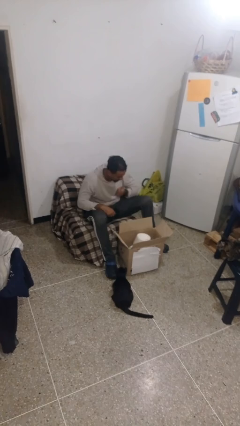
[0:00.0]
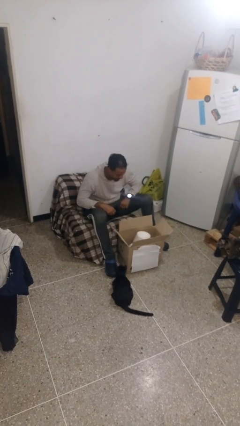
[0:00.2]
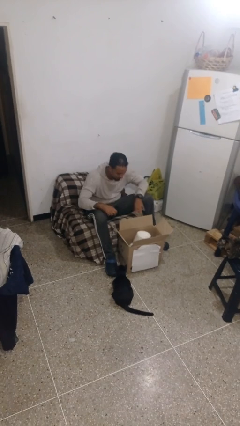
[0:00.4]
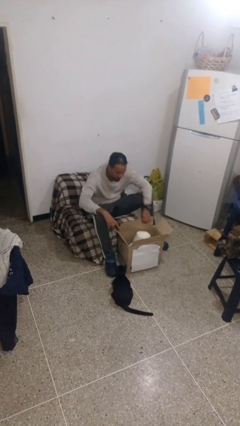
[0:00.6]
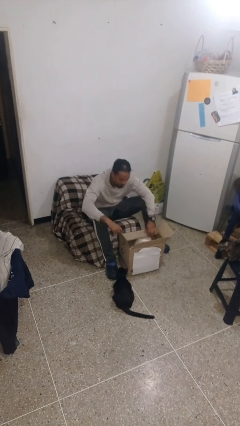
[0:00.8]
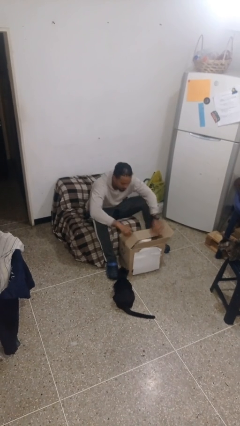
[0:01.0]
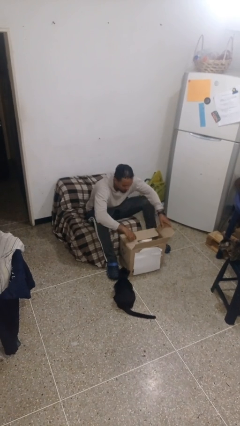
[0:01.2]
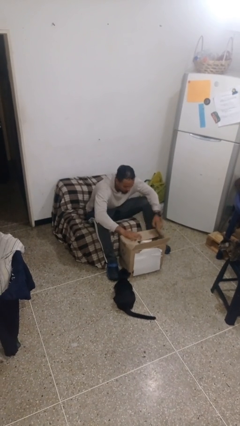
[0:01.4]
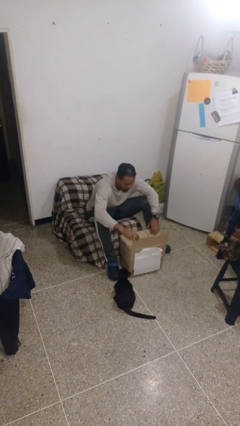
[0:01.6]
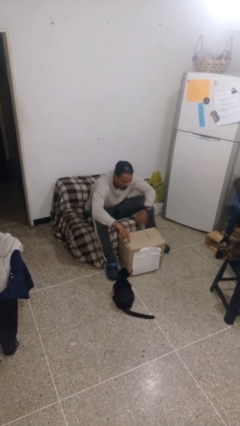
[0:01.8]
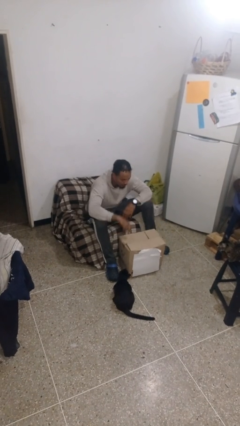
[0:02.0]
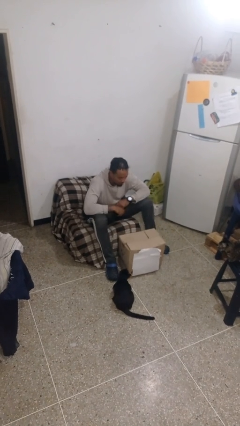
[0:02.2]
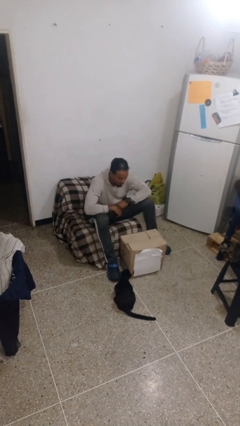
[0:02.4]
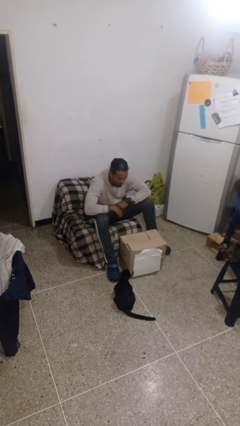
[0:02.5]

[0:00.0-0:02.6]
person closes box

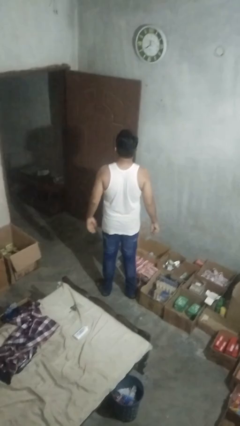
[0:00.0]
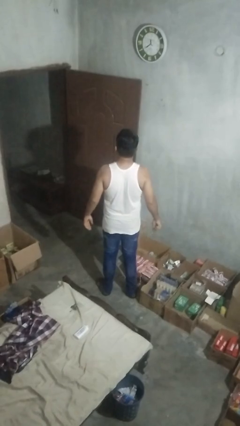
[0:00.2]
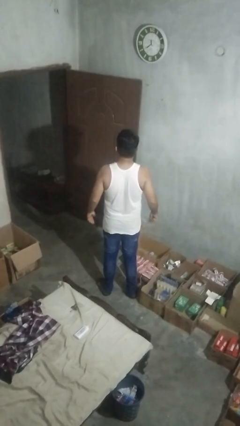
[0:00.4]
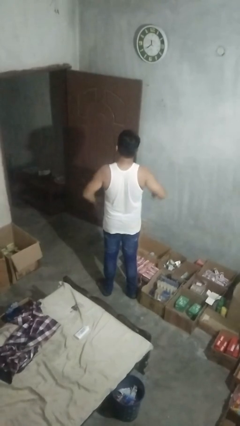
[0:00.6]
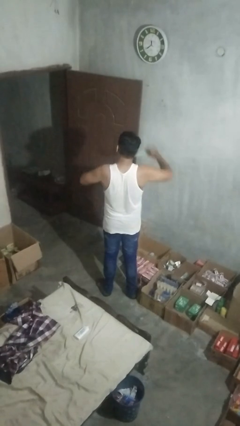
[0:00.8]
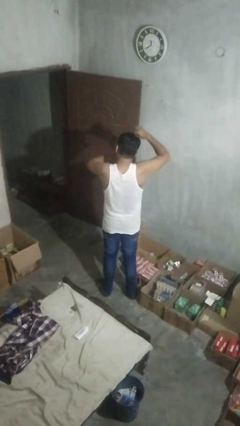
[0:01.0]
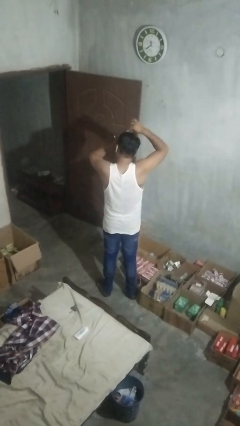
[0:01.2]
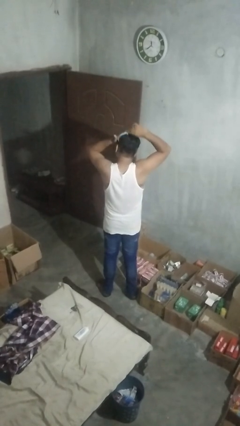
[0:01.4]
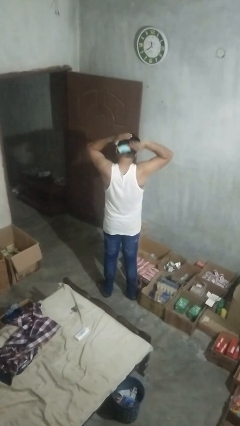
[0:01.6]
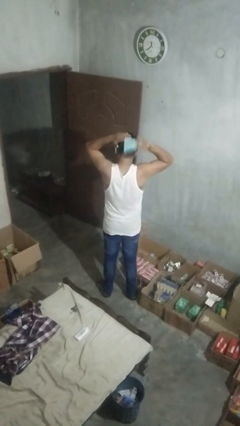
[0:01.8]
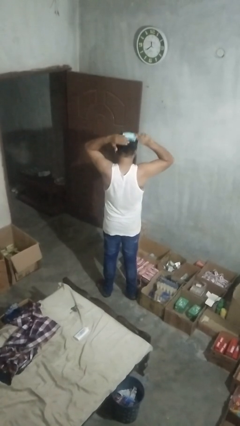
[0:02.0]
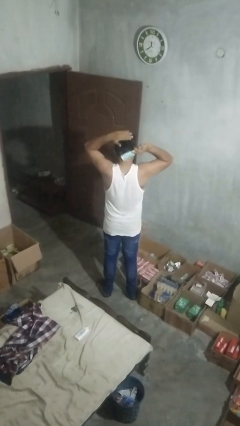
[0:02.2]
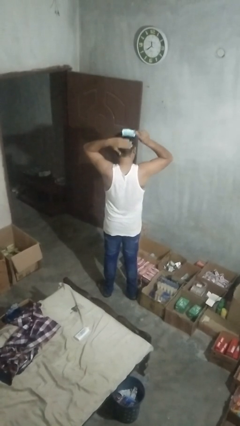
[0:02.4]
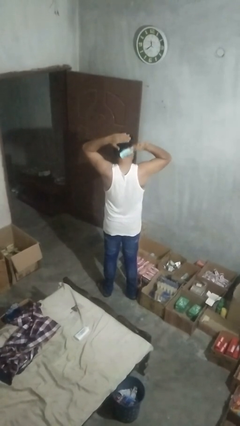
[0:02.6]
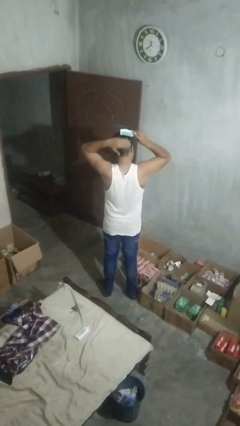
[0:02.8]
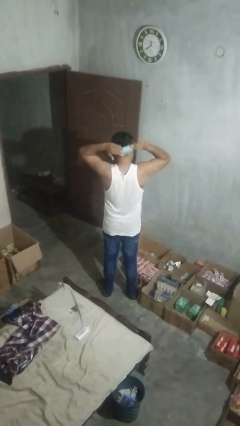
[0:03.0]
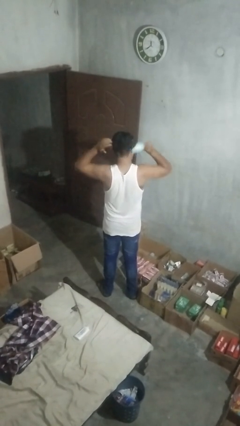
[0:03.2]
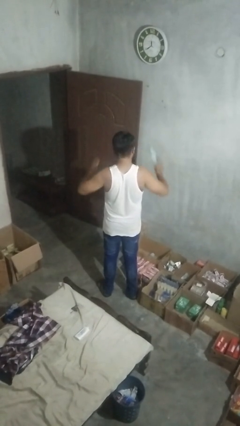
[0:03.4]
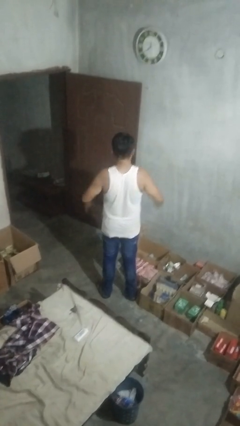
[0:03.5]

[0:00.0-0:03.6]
person brushes hair

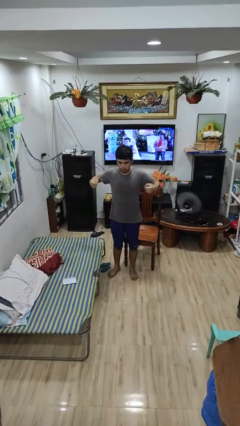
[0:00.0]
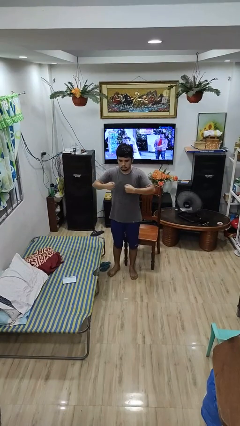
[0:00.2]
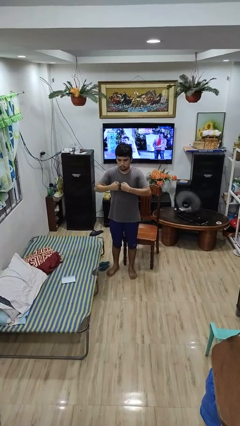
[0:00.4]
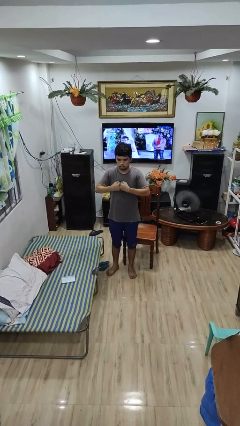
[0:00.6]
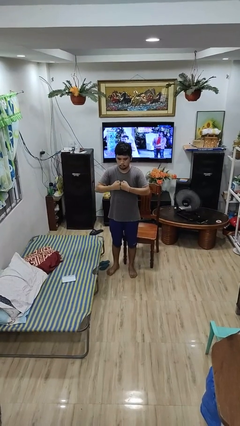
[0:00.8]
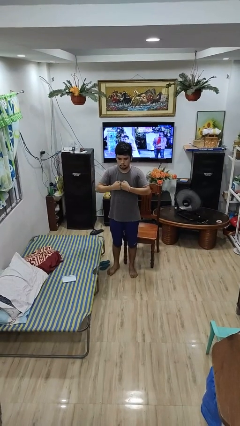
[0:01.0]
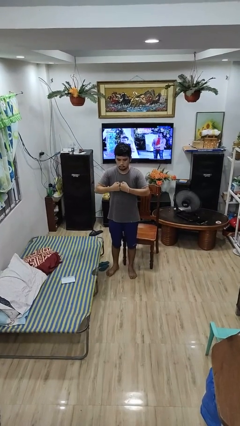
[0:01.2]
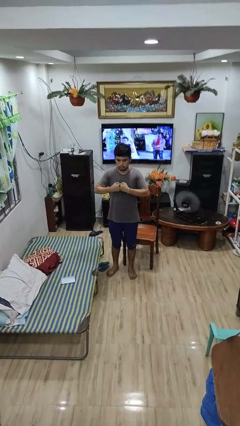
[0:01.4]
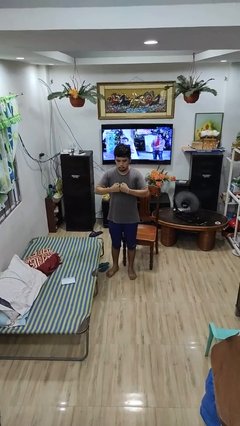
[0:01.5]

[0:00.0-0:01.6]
person gestures zoom out

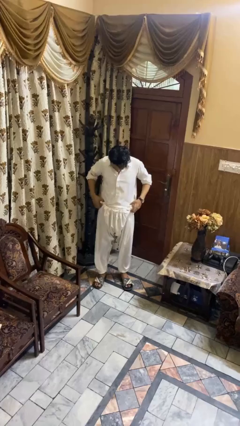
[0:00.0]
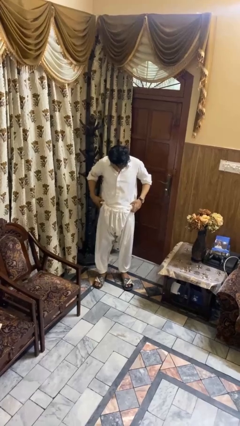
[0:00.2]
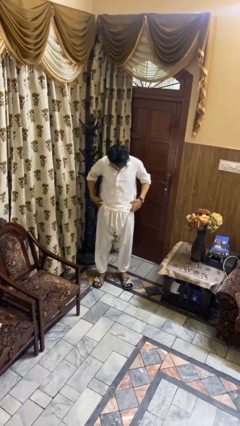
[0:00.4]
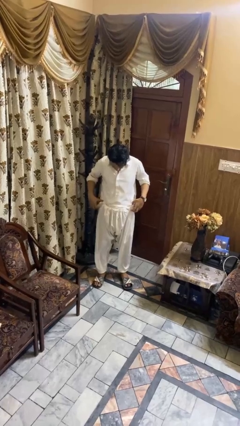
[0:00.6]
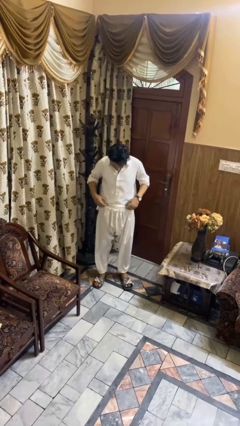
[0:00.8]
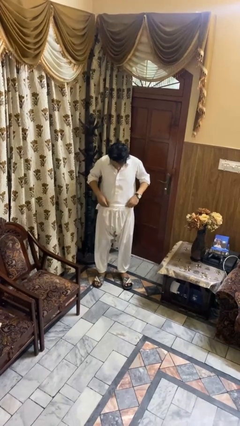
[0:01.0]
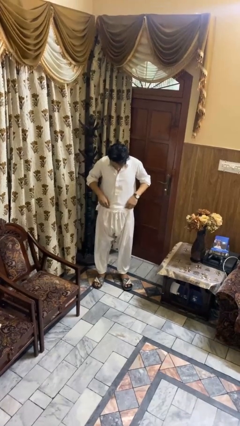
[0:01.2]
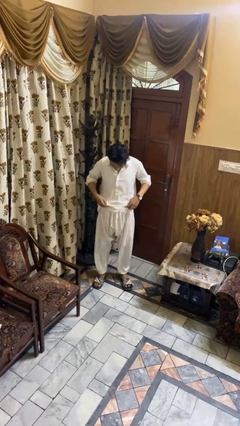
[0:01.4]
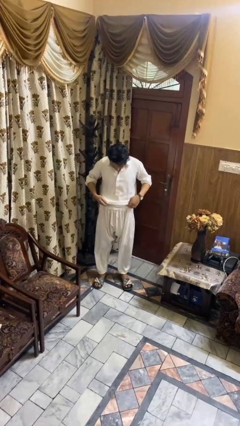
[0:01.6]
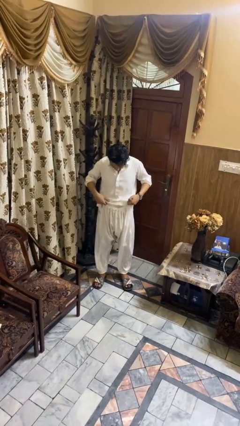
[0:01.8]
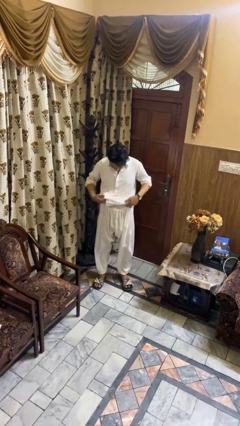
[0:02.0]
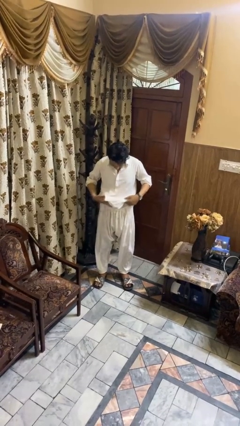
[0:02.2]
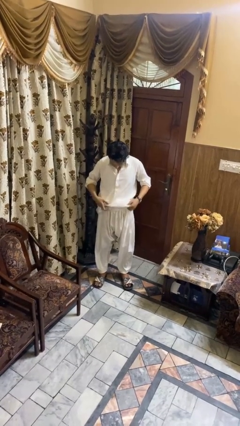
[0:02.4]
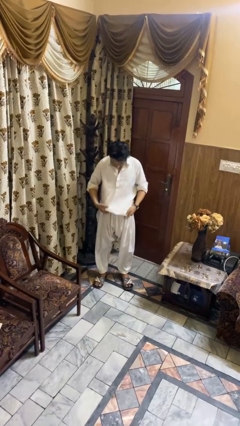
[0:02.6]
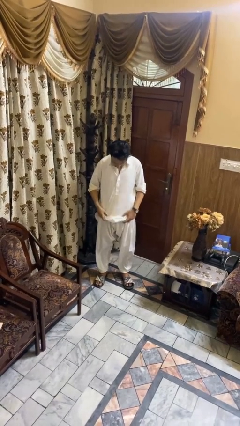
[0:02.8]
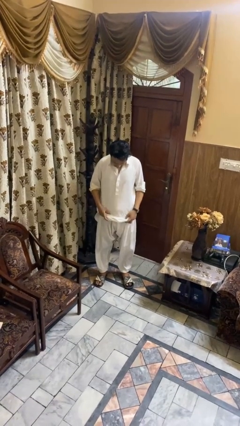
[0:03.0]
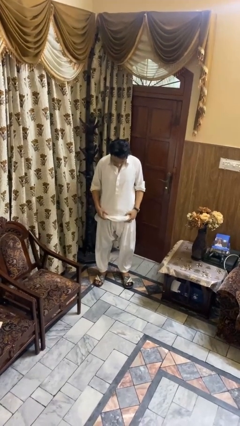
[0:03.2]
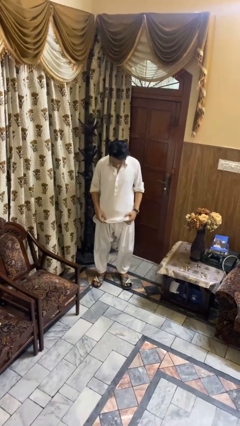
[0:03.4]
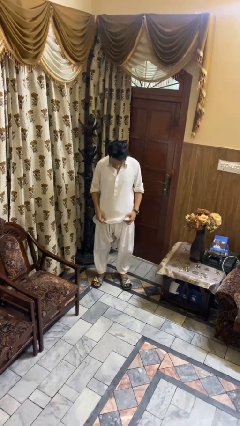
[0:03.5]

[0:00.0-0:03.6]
person untucks shirt

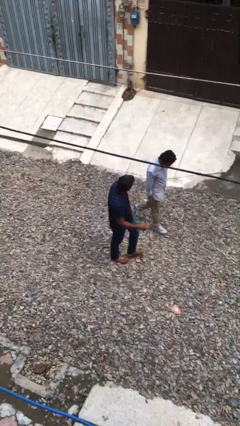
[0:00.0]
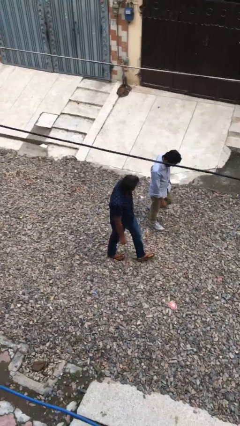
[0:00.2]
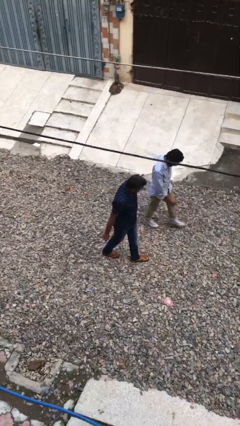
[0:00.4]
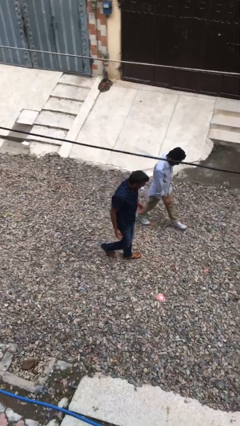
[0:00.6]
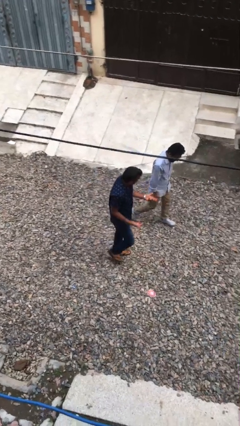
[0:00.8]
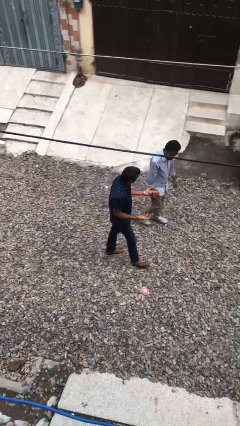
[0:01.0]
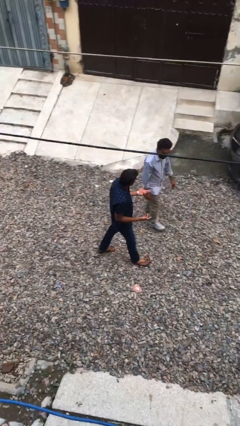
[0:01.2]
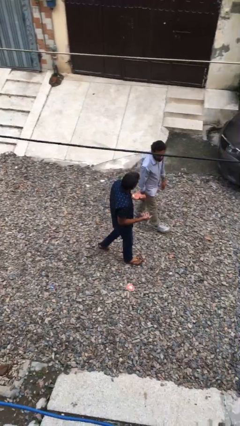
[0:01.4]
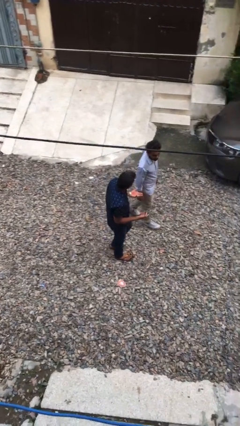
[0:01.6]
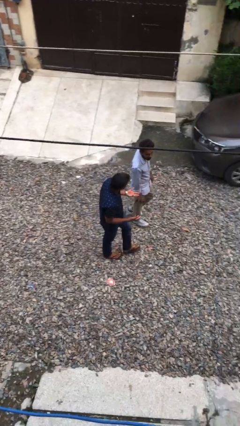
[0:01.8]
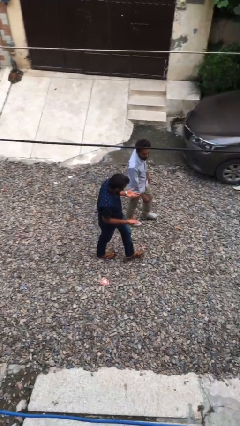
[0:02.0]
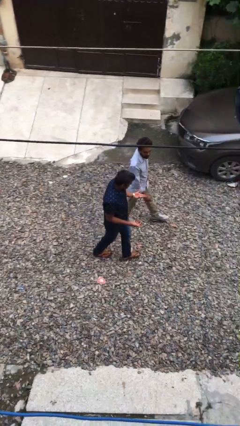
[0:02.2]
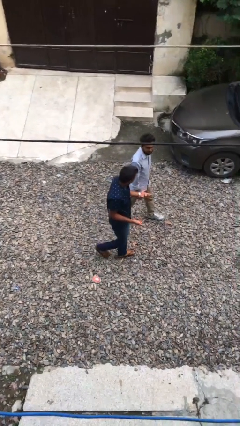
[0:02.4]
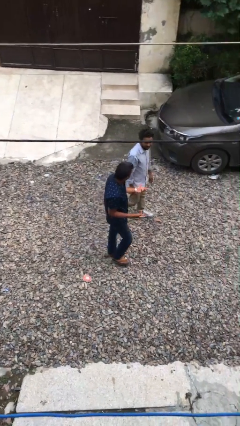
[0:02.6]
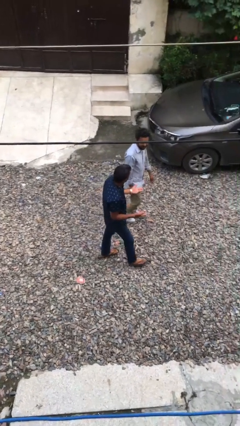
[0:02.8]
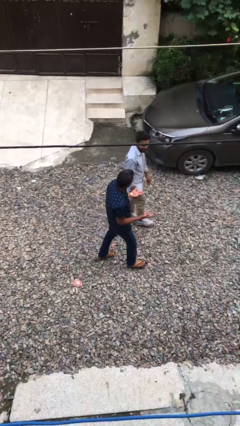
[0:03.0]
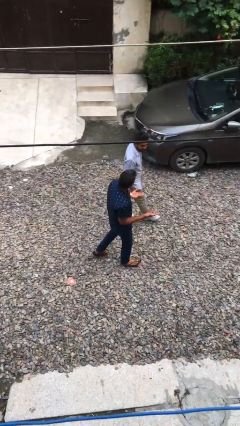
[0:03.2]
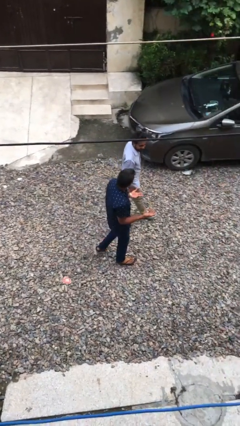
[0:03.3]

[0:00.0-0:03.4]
person talks to person

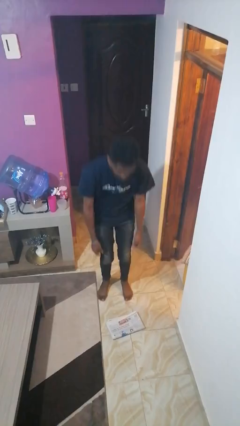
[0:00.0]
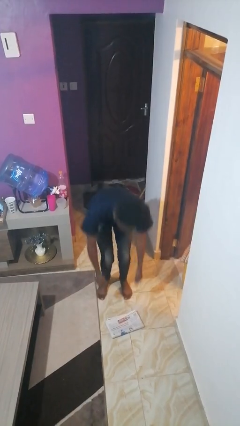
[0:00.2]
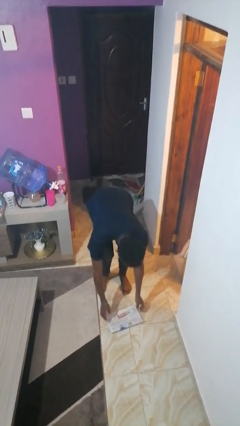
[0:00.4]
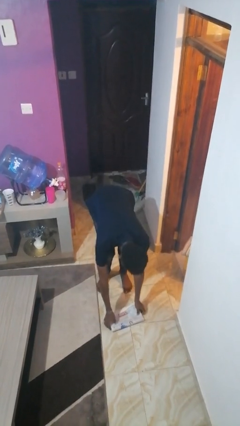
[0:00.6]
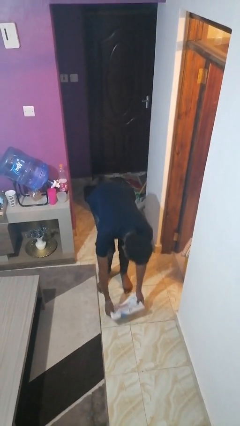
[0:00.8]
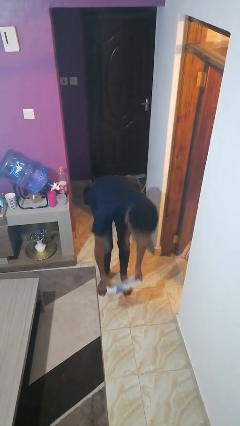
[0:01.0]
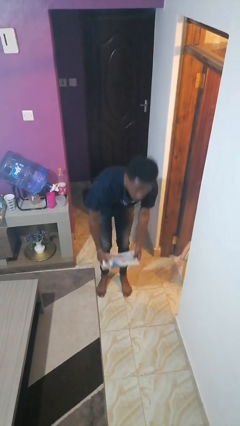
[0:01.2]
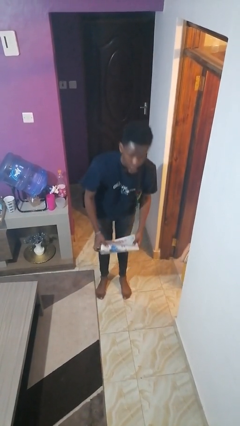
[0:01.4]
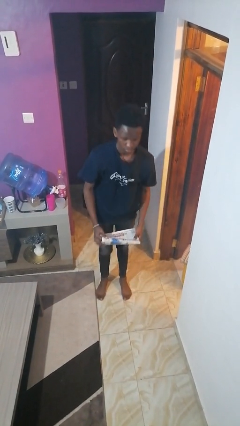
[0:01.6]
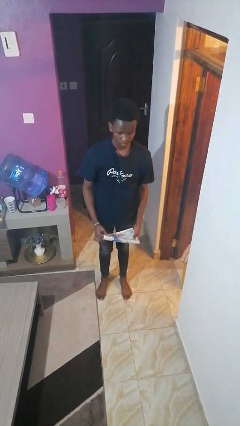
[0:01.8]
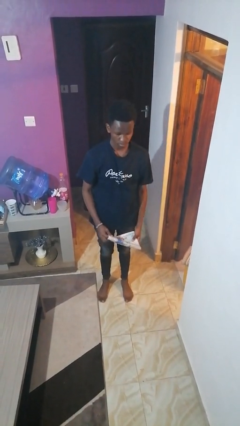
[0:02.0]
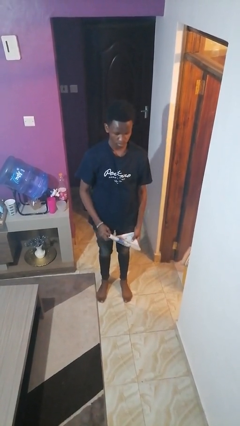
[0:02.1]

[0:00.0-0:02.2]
person picks up object from floor

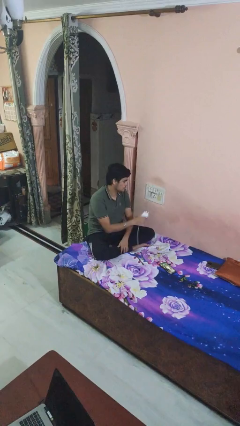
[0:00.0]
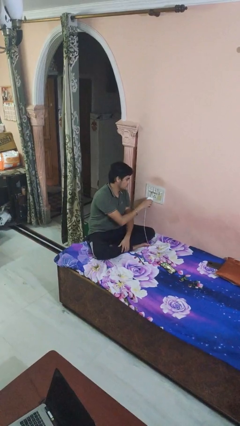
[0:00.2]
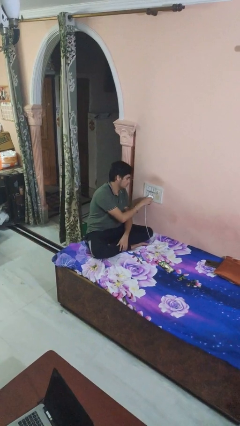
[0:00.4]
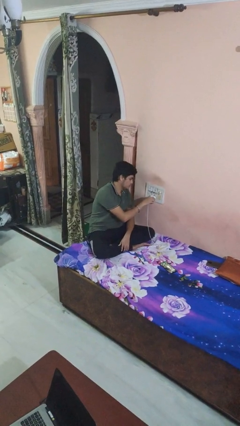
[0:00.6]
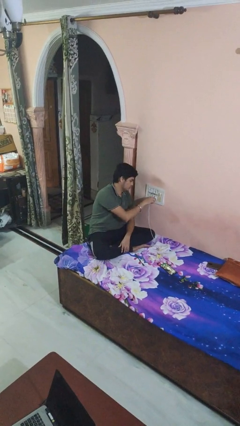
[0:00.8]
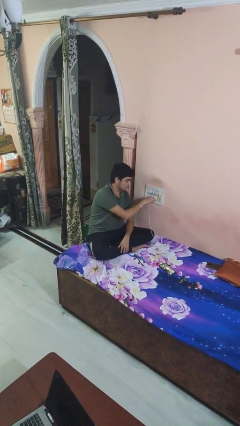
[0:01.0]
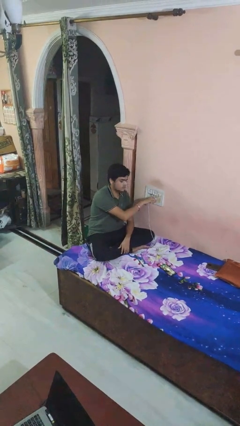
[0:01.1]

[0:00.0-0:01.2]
person plugs into electrical socket
